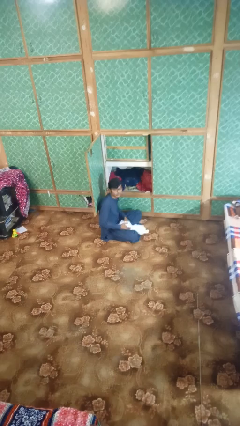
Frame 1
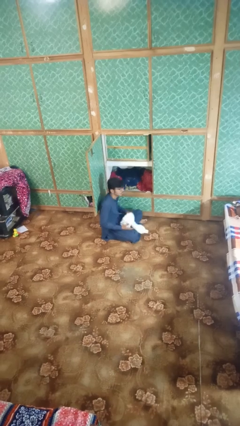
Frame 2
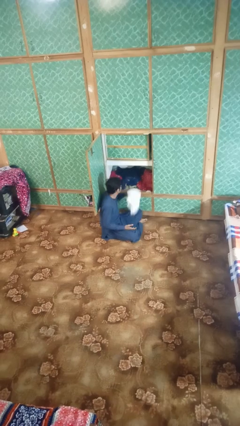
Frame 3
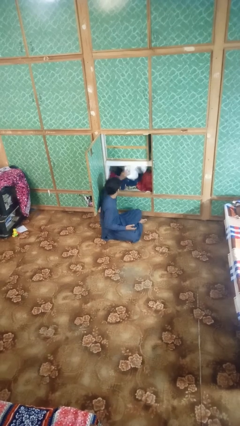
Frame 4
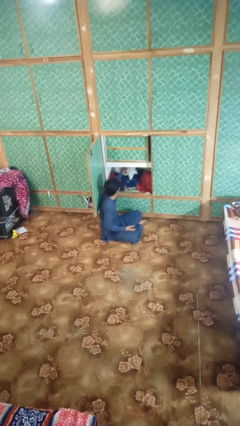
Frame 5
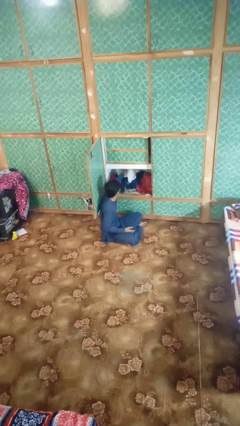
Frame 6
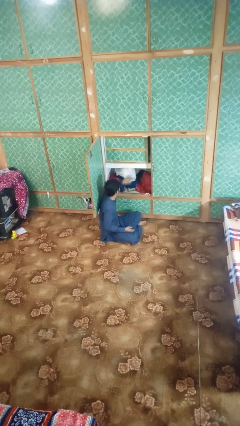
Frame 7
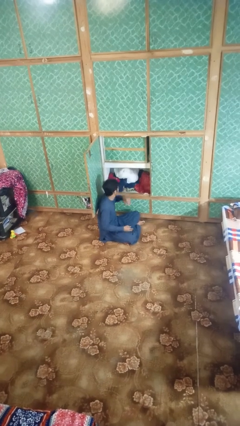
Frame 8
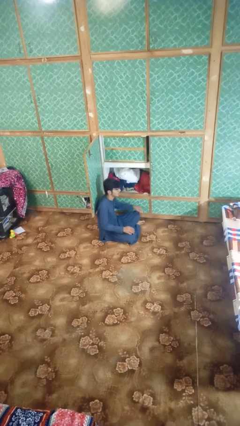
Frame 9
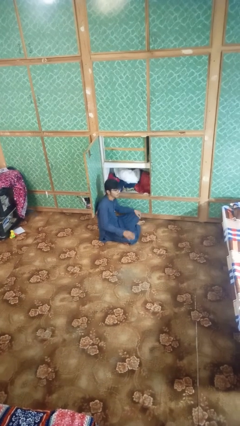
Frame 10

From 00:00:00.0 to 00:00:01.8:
person puts clothes into dresser

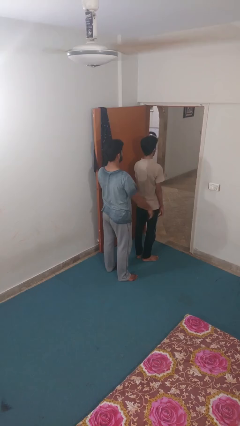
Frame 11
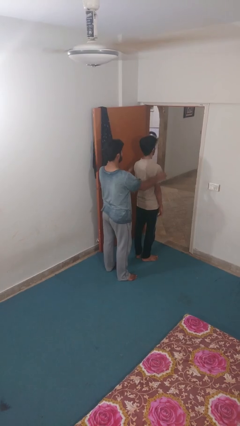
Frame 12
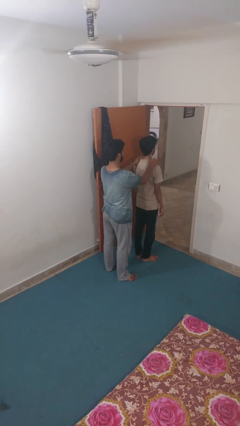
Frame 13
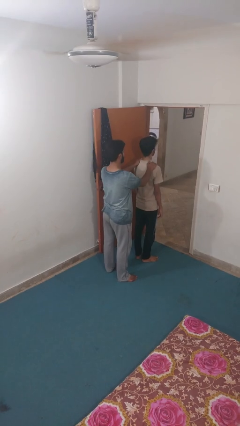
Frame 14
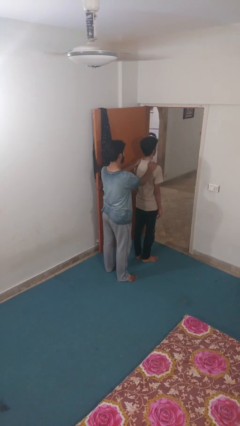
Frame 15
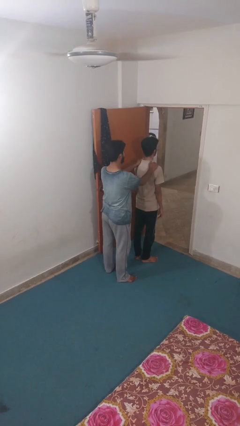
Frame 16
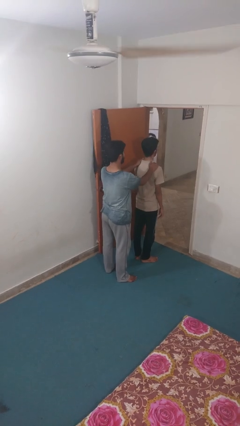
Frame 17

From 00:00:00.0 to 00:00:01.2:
person grabs person by shoulder

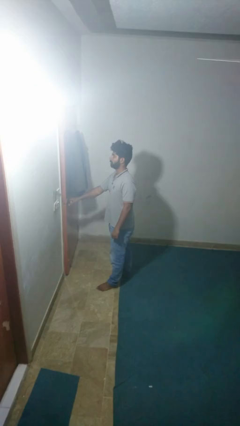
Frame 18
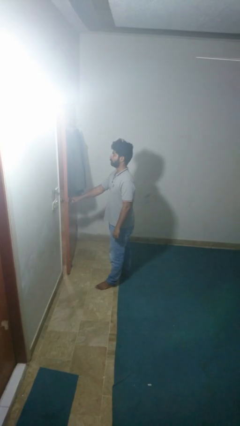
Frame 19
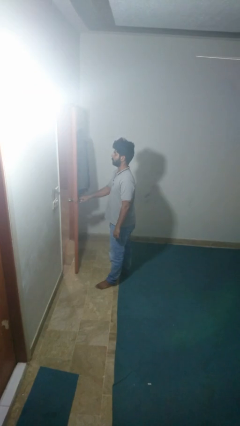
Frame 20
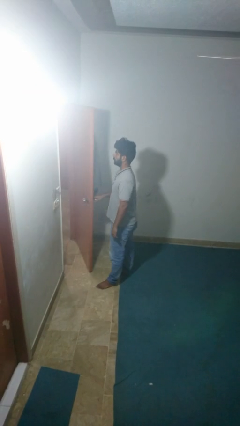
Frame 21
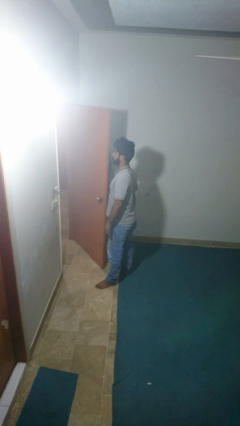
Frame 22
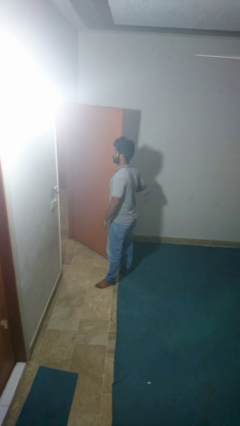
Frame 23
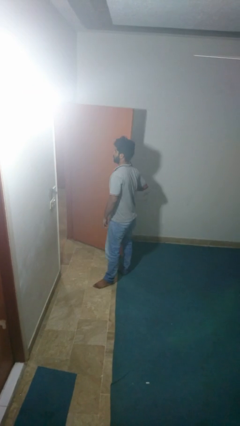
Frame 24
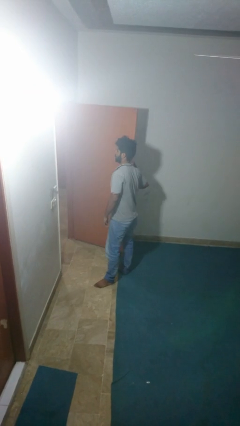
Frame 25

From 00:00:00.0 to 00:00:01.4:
person opens facility door

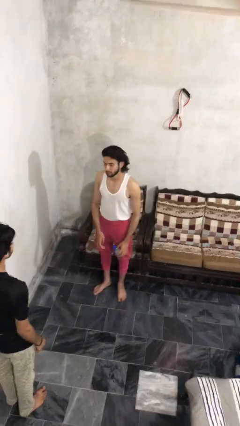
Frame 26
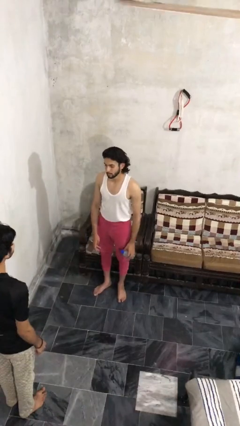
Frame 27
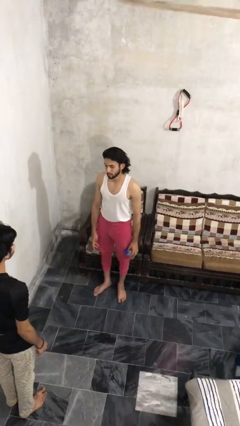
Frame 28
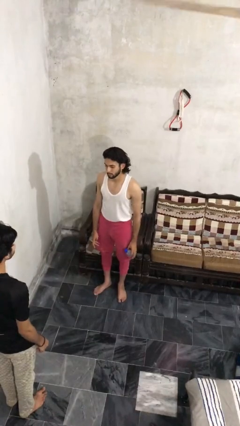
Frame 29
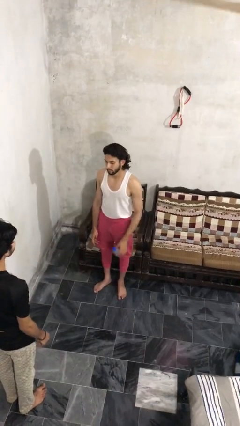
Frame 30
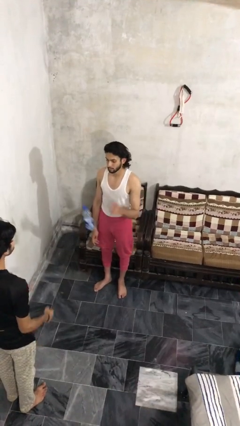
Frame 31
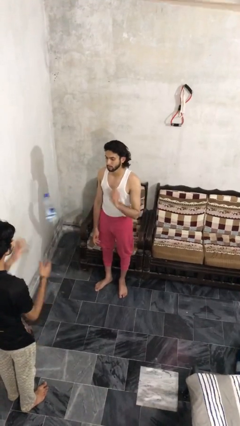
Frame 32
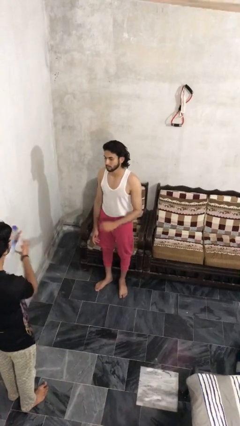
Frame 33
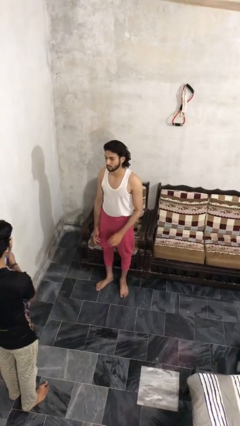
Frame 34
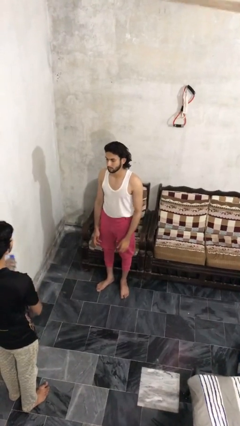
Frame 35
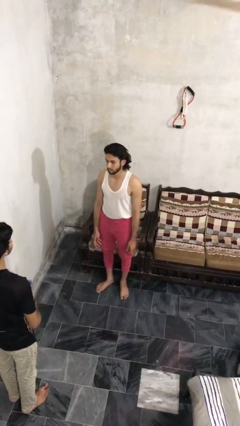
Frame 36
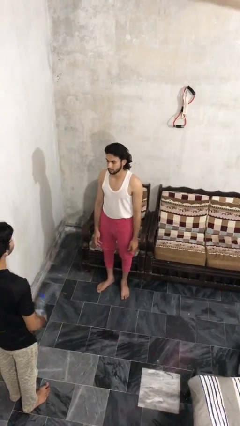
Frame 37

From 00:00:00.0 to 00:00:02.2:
person throws object to person

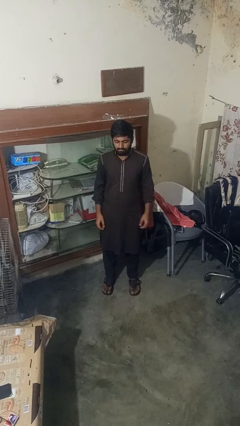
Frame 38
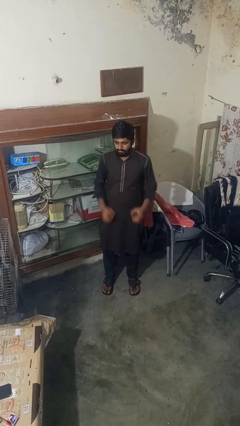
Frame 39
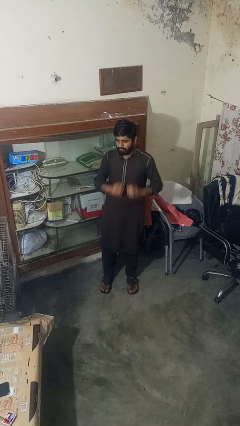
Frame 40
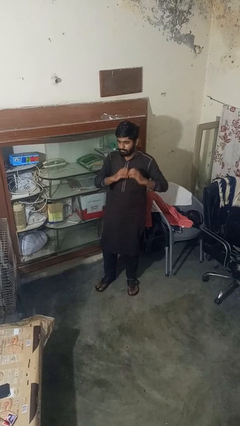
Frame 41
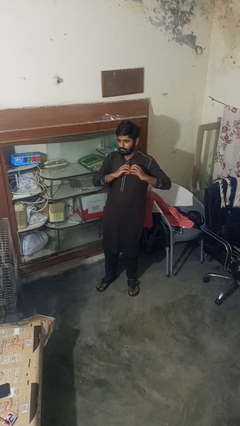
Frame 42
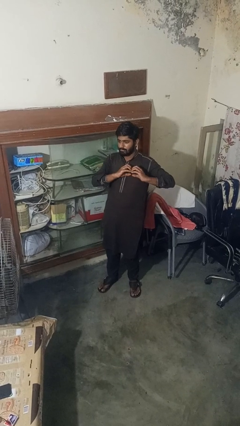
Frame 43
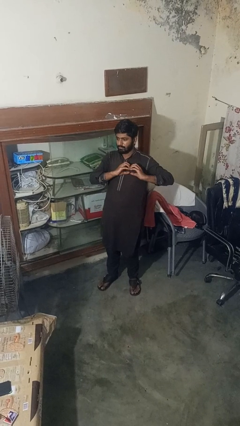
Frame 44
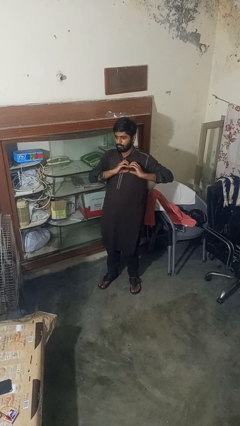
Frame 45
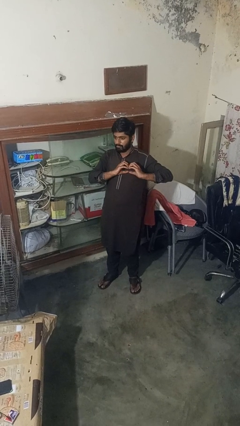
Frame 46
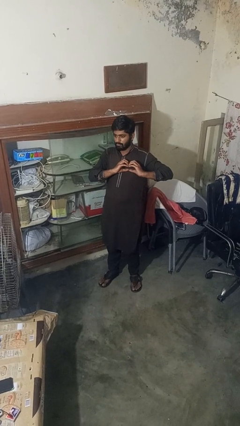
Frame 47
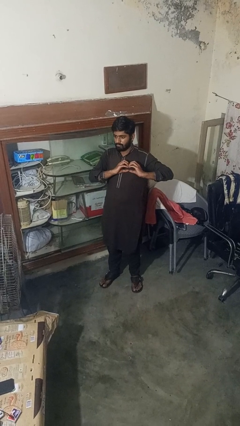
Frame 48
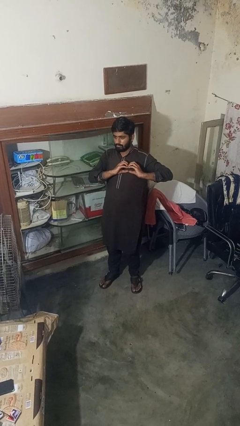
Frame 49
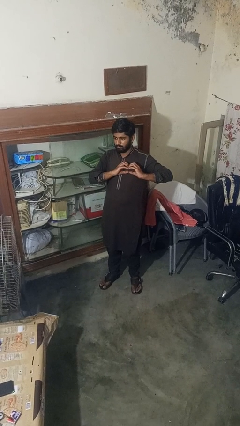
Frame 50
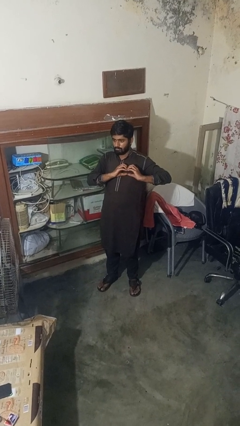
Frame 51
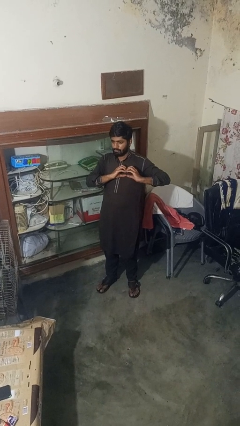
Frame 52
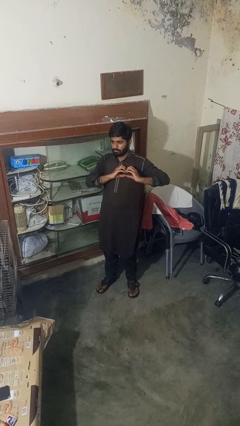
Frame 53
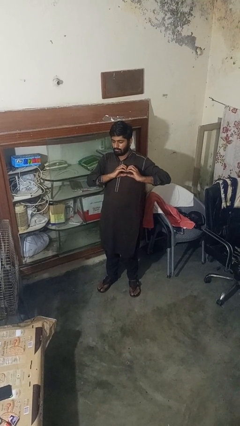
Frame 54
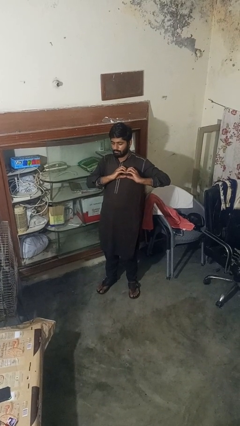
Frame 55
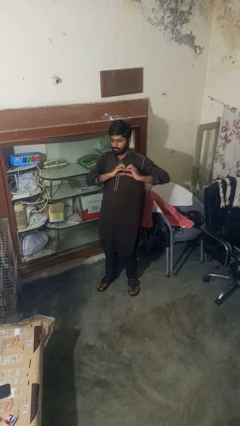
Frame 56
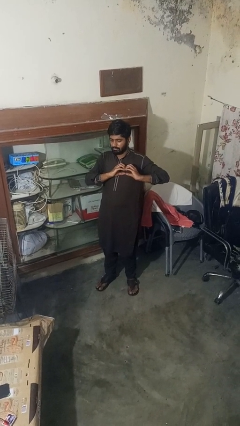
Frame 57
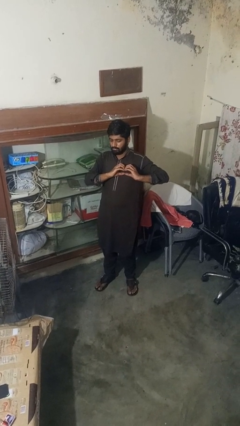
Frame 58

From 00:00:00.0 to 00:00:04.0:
person gestures heart

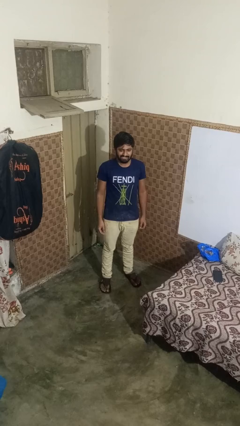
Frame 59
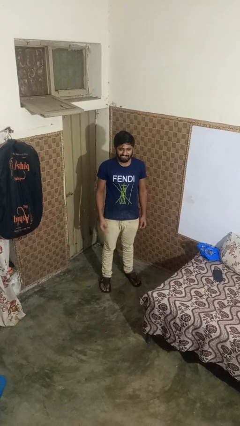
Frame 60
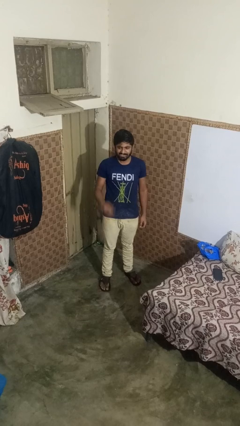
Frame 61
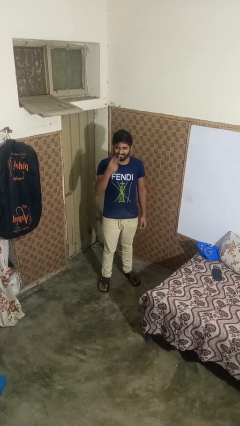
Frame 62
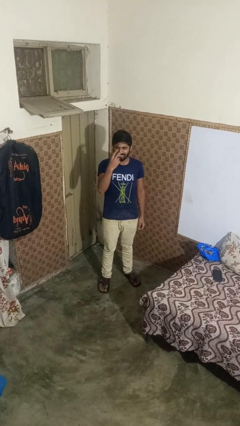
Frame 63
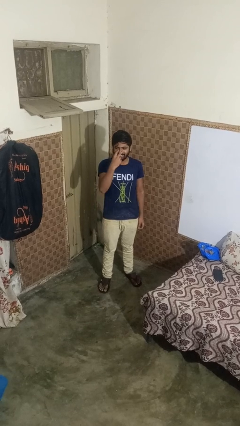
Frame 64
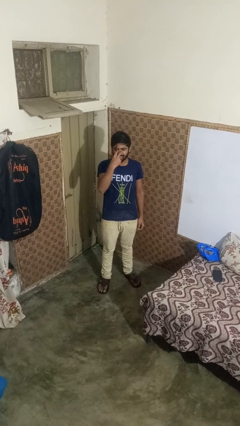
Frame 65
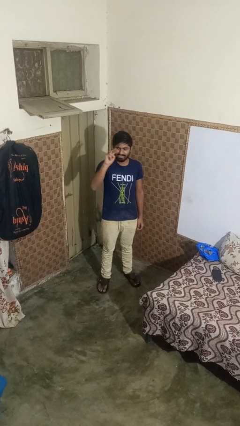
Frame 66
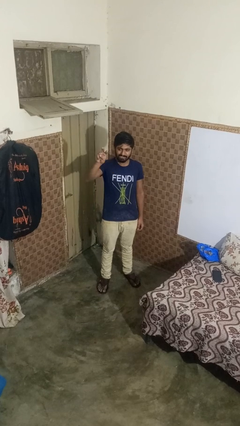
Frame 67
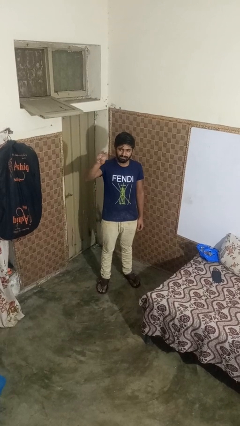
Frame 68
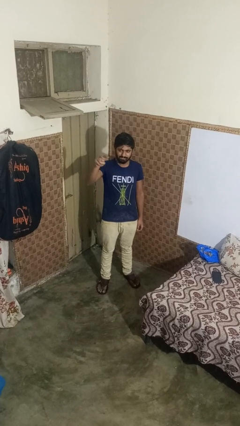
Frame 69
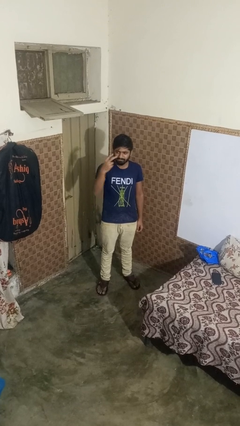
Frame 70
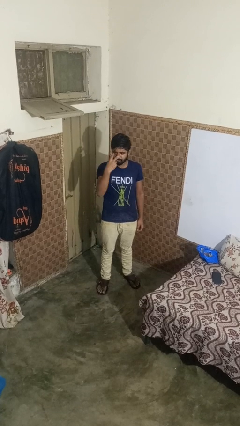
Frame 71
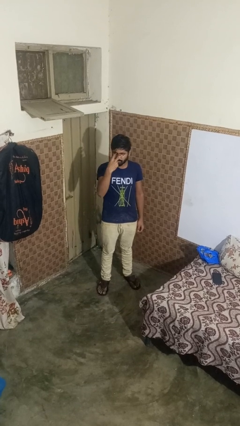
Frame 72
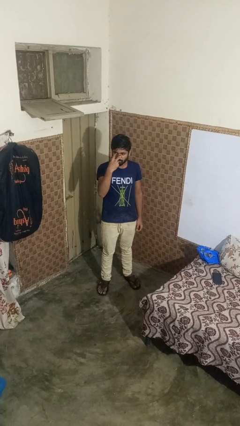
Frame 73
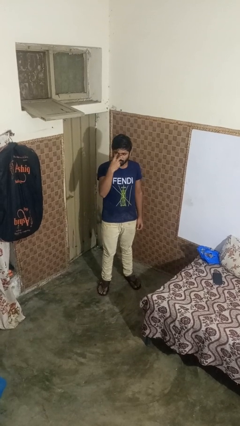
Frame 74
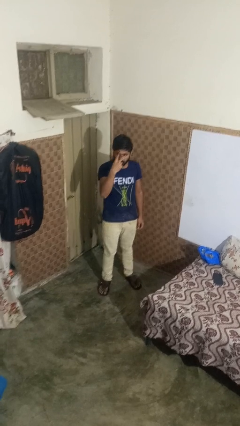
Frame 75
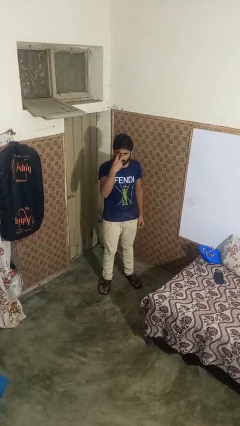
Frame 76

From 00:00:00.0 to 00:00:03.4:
person gestures watch closely

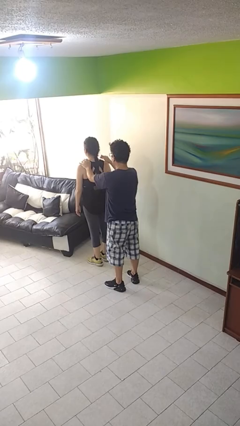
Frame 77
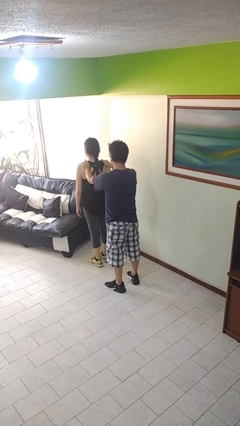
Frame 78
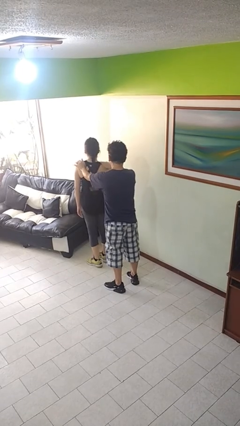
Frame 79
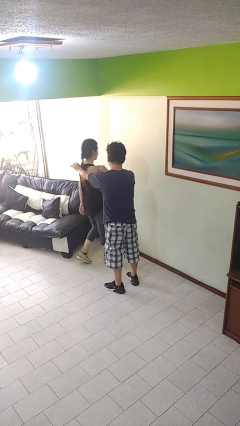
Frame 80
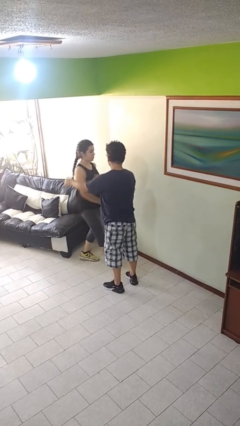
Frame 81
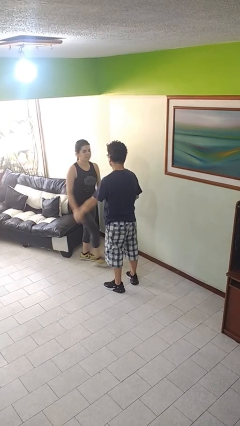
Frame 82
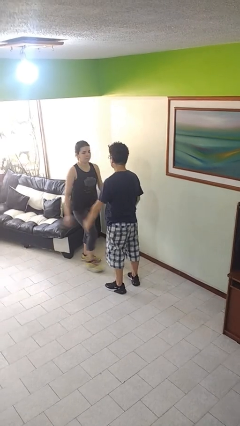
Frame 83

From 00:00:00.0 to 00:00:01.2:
person spins person around

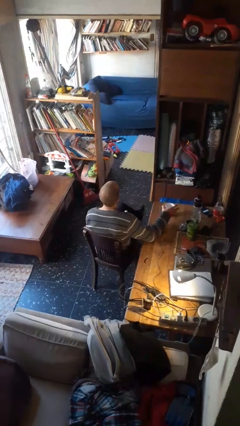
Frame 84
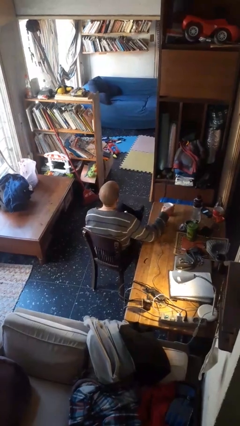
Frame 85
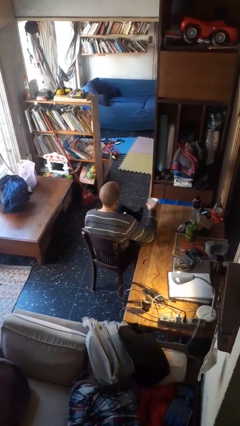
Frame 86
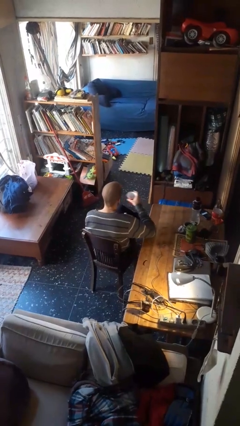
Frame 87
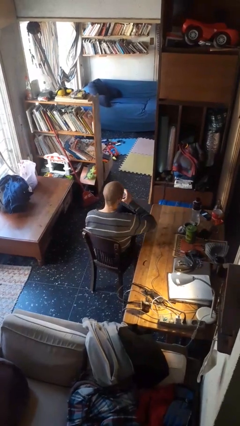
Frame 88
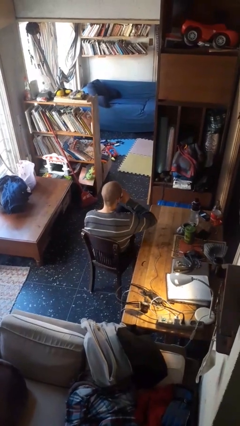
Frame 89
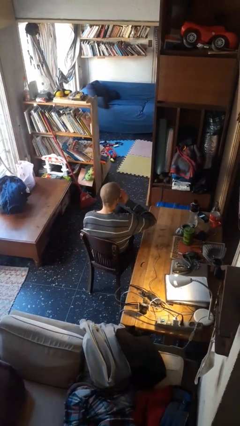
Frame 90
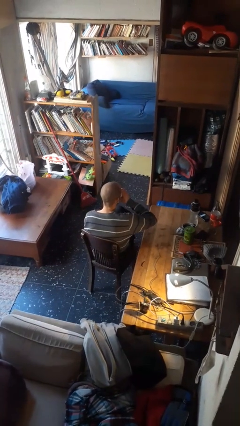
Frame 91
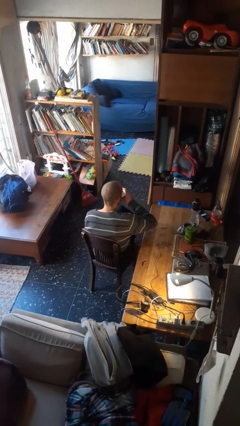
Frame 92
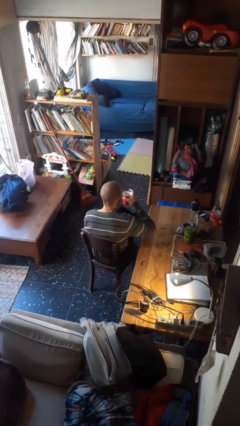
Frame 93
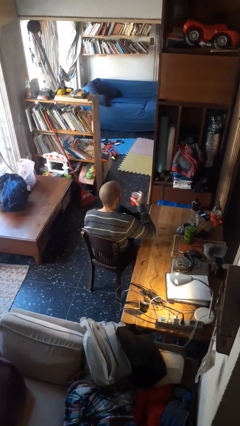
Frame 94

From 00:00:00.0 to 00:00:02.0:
person drinks from cup
